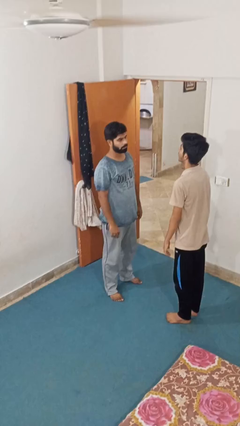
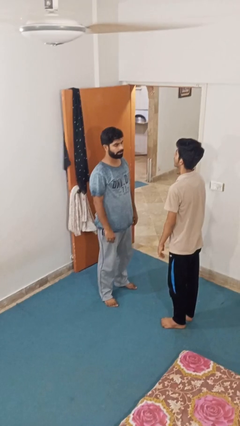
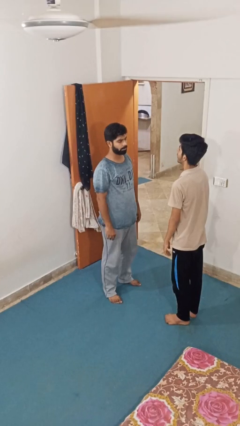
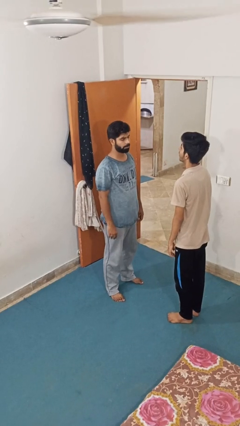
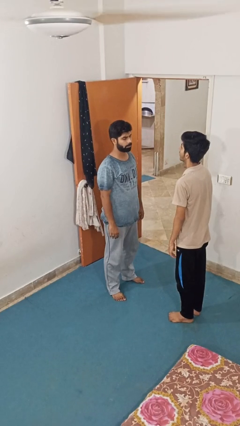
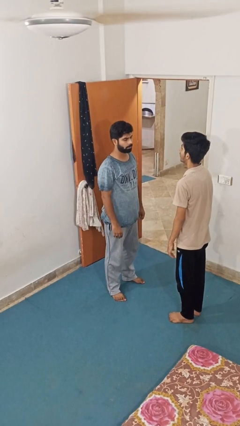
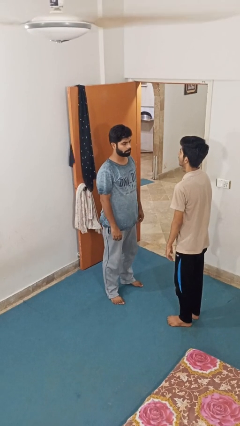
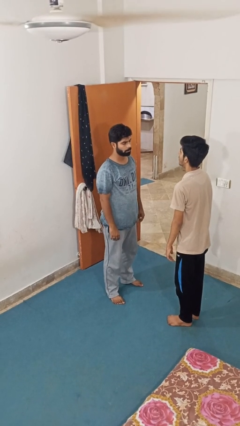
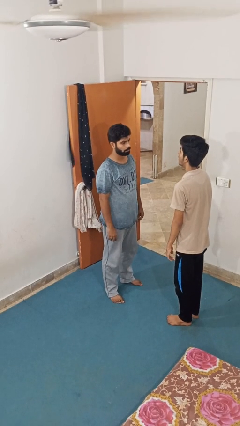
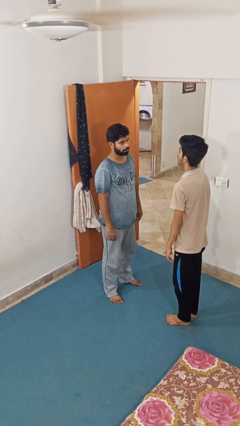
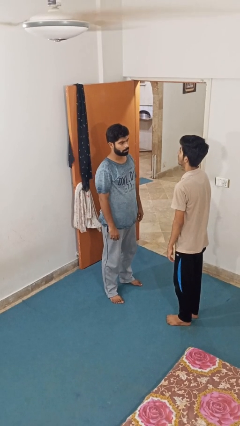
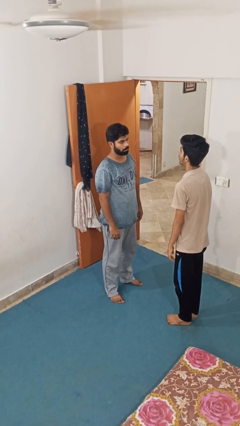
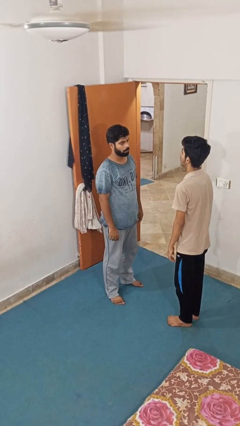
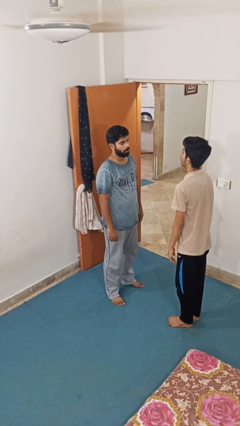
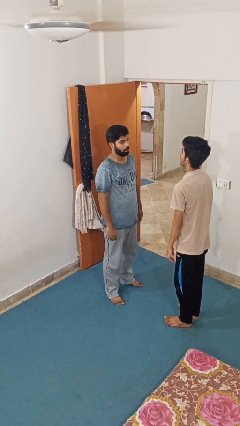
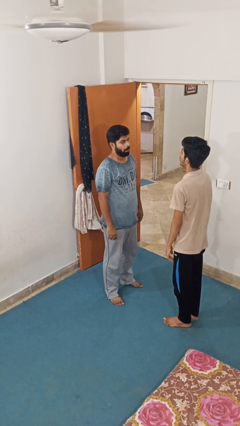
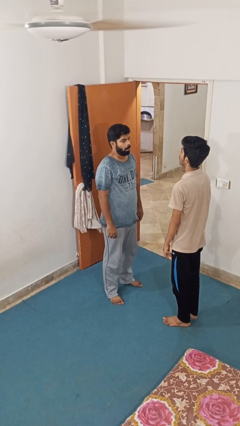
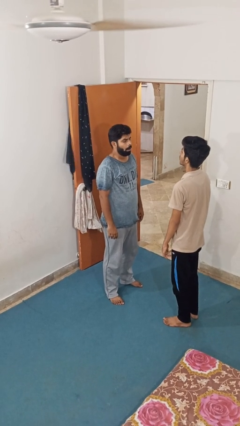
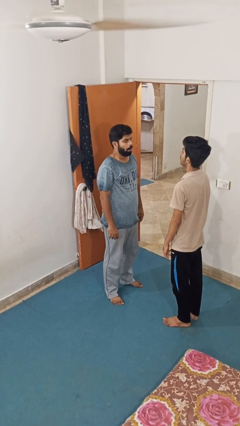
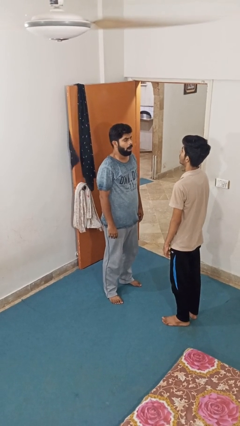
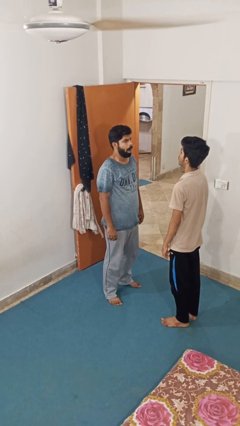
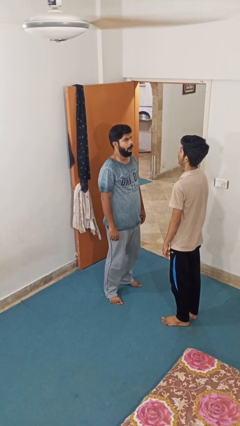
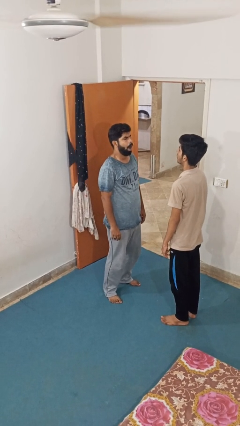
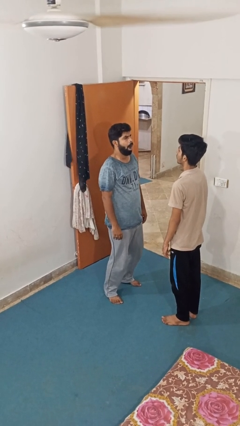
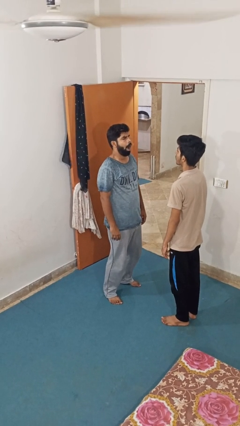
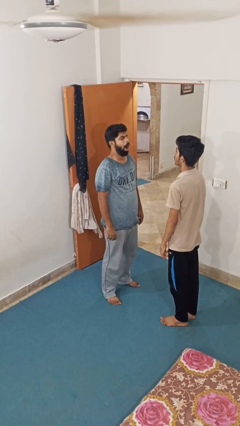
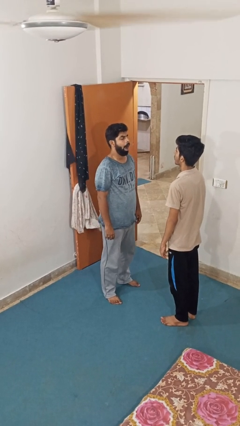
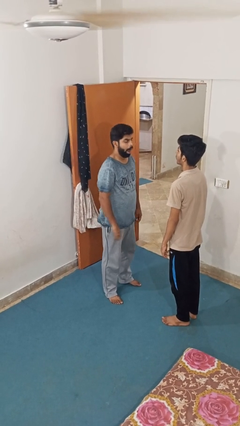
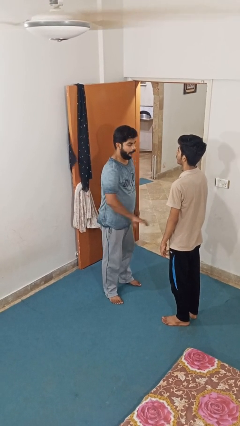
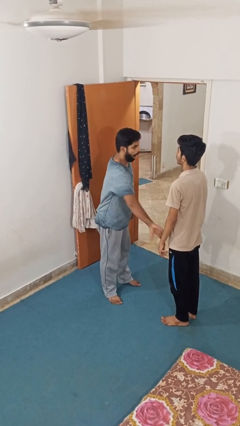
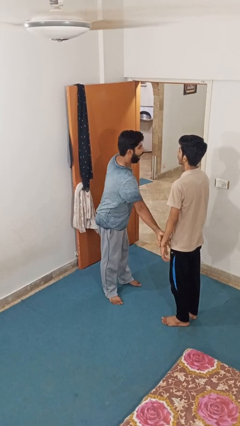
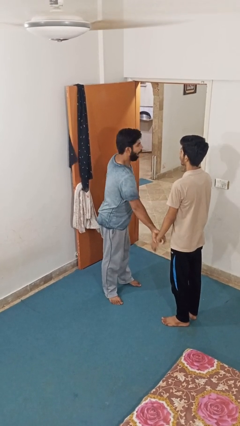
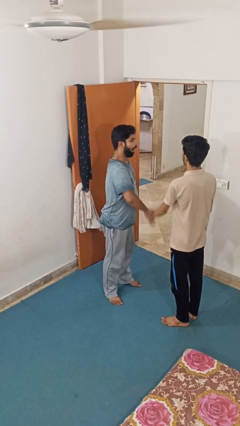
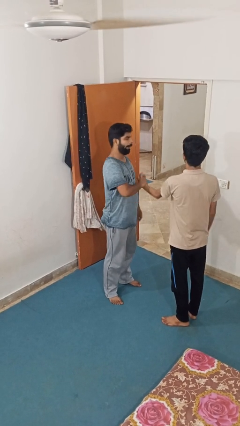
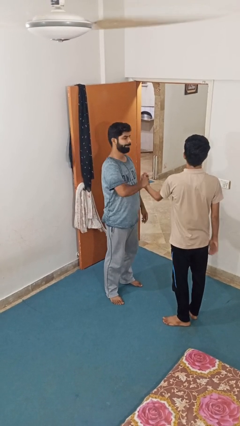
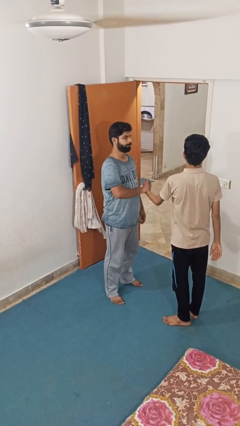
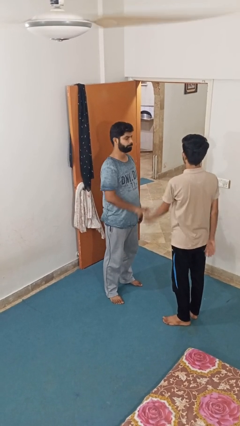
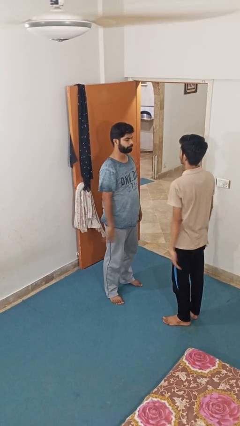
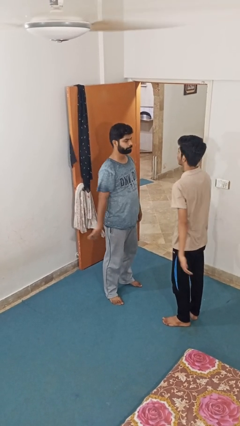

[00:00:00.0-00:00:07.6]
person grabs person by forearm

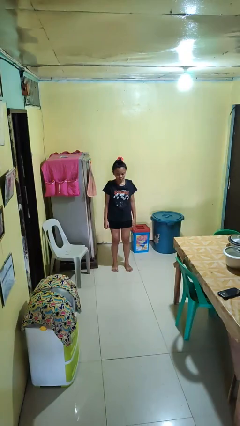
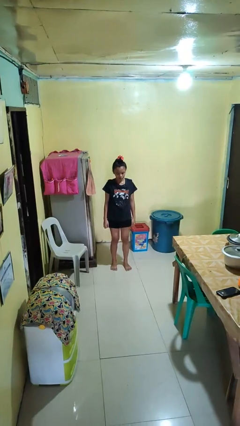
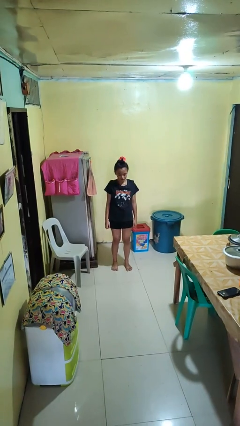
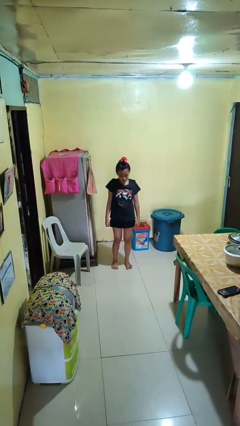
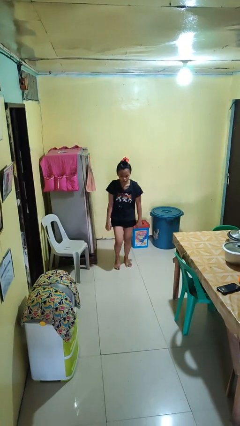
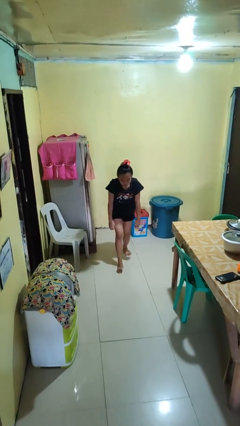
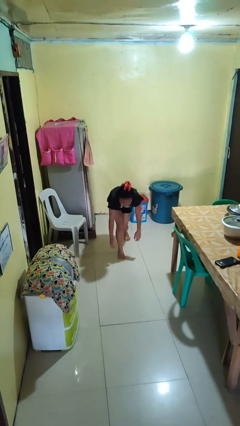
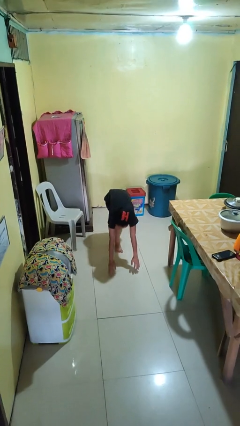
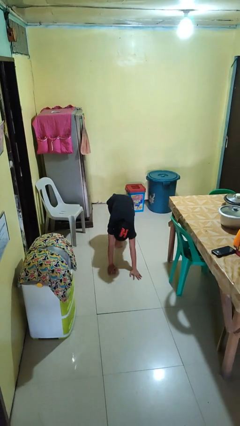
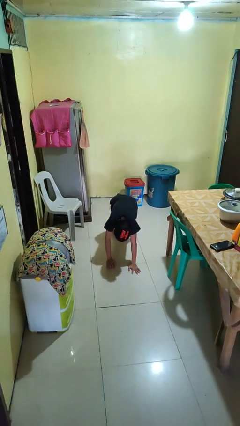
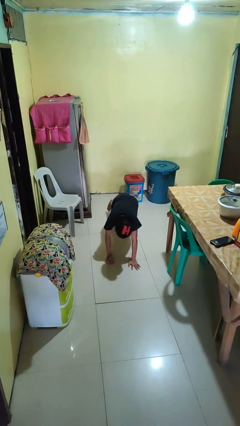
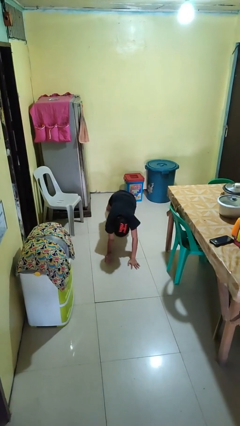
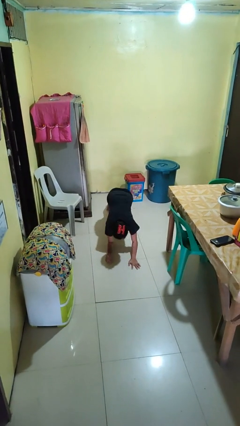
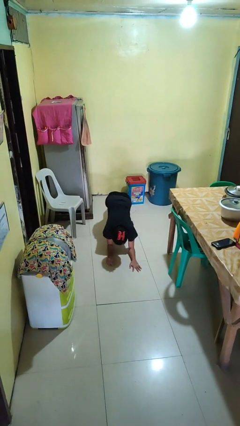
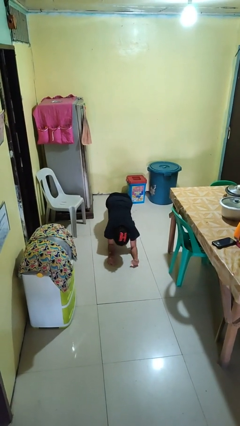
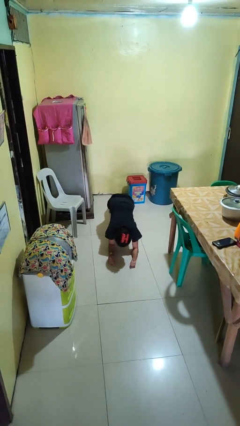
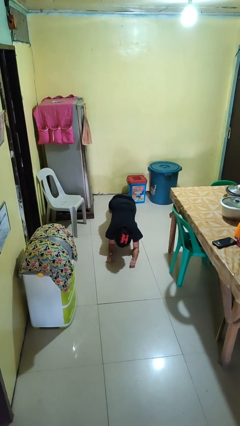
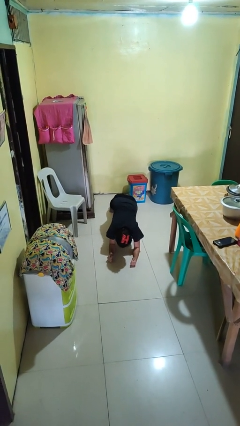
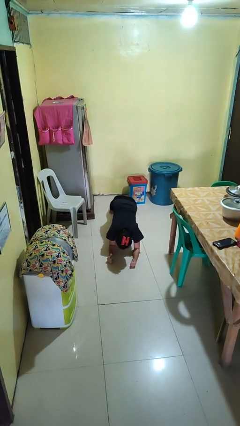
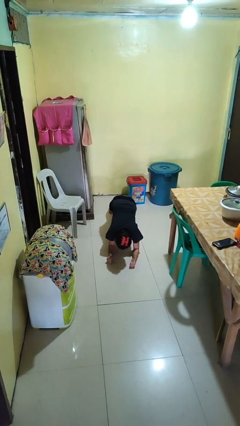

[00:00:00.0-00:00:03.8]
person exercises with plank

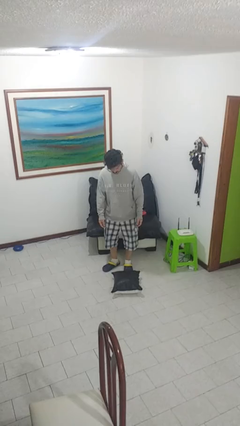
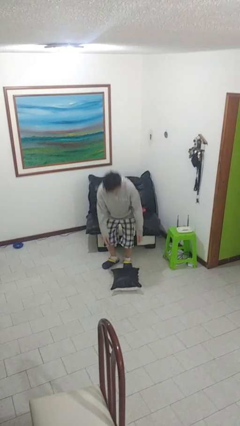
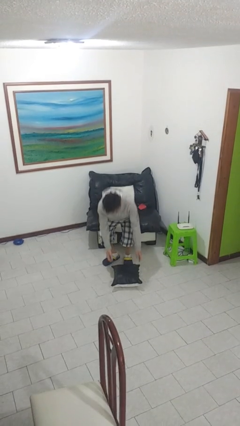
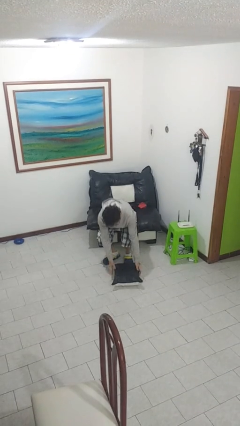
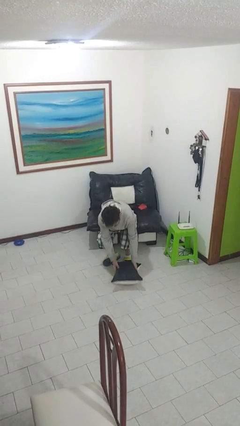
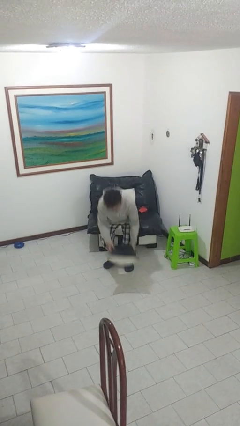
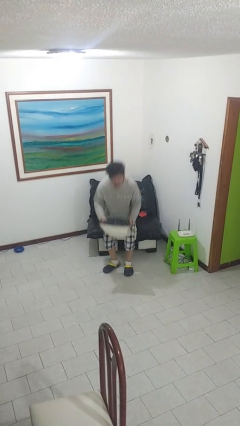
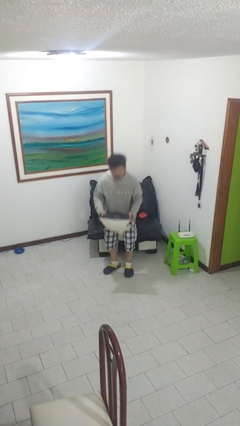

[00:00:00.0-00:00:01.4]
person picks up object from floor

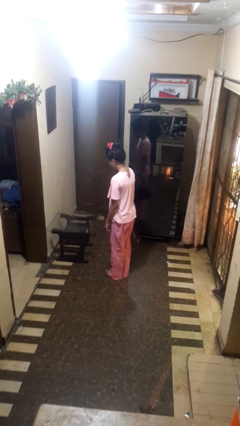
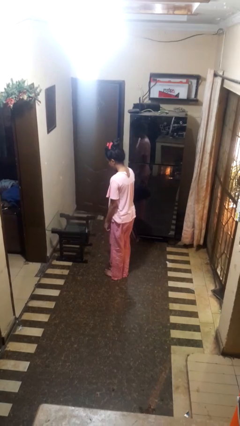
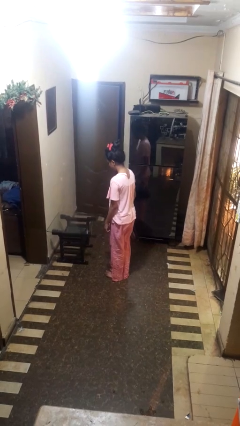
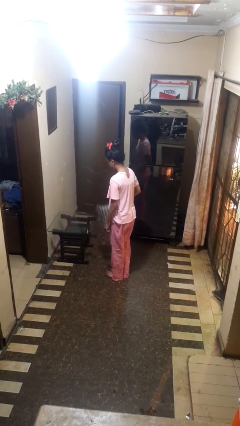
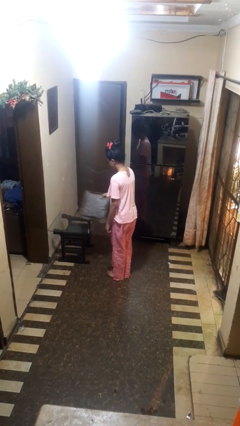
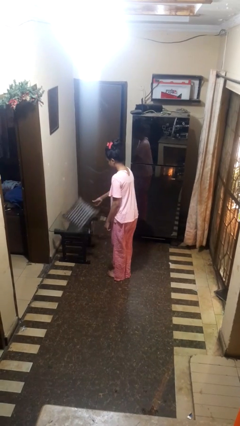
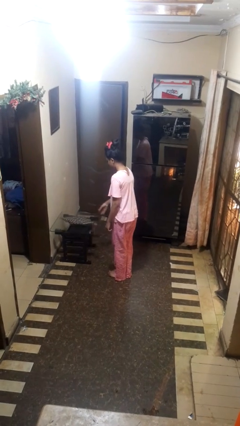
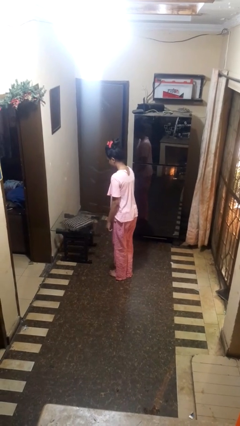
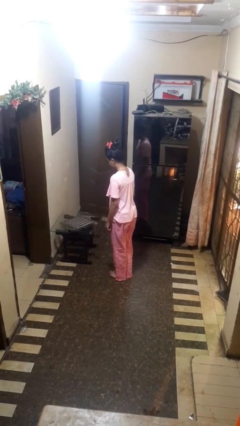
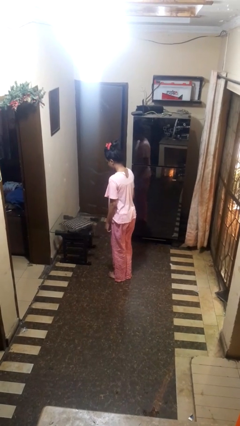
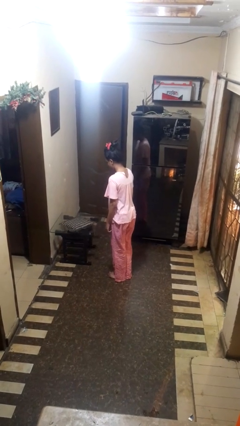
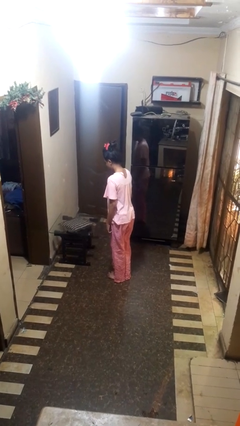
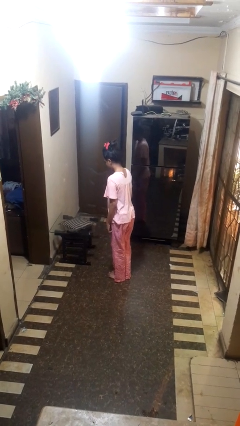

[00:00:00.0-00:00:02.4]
person throws object on table

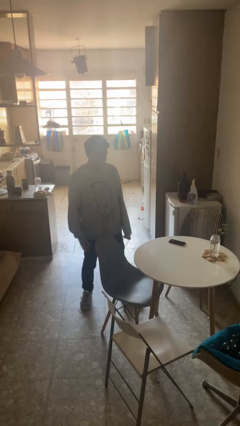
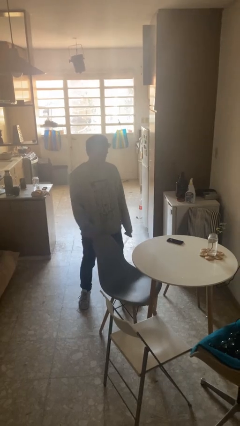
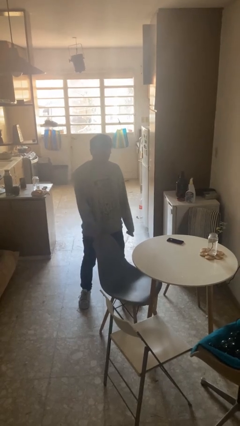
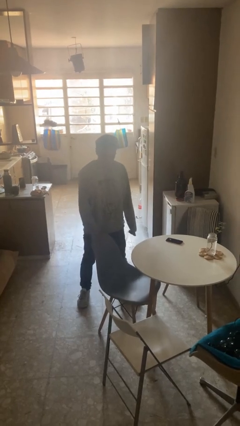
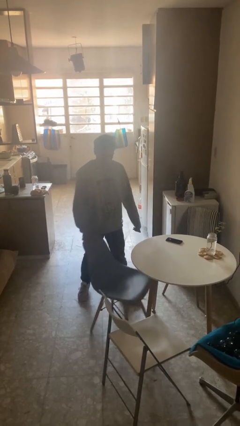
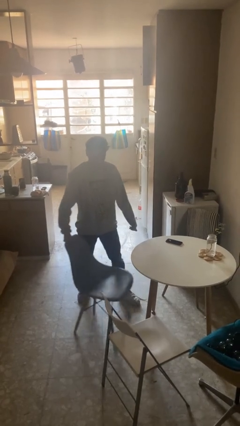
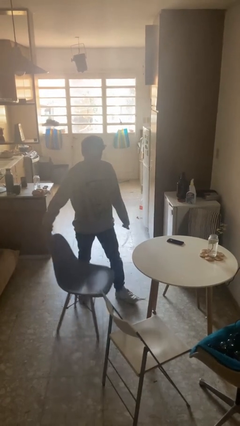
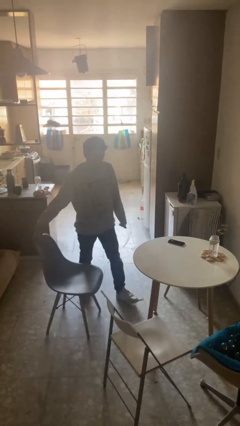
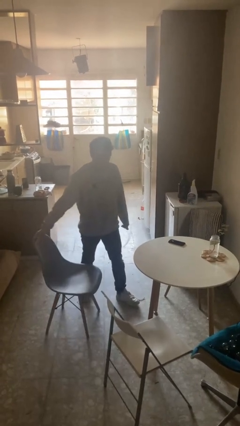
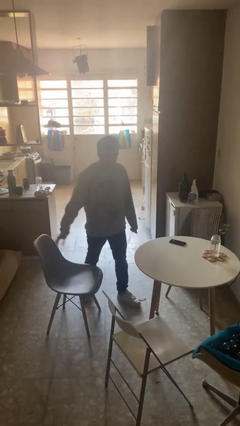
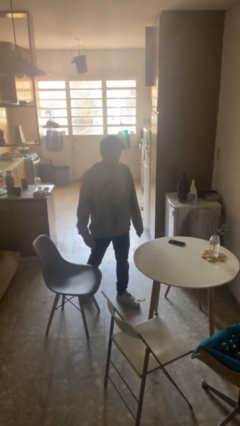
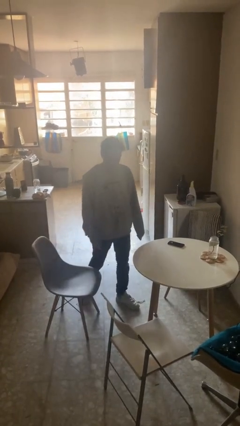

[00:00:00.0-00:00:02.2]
person pulls out chair
